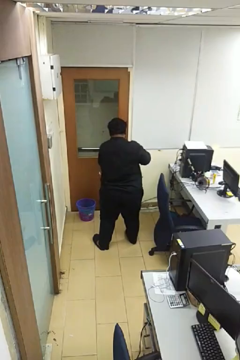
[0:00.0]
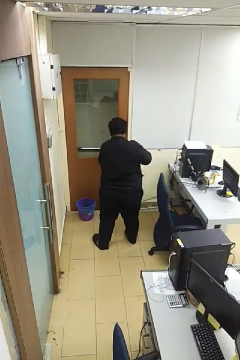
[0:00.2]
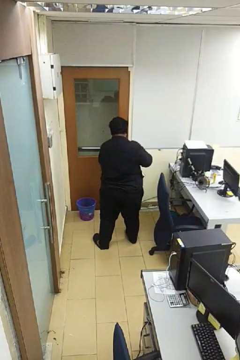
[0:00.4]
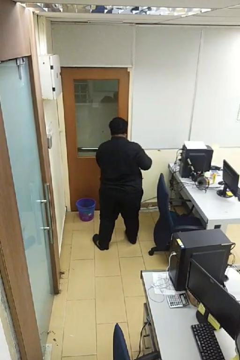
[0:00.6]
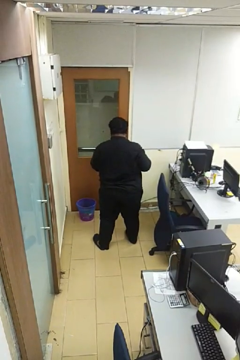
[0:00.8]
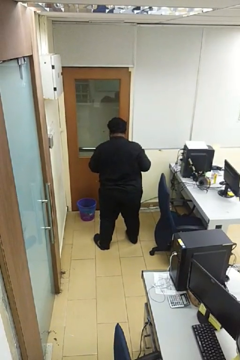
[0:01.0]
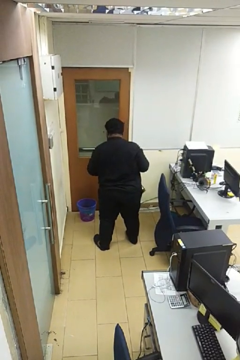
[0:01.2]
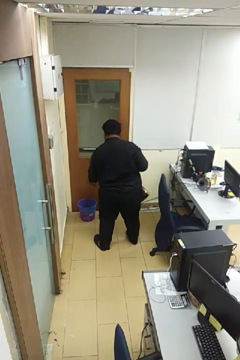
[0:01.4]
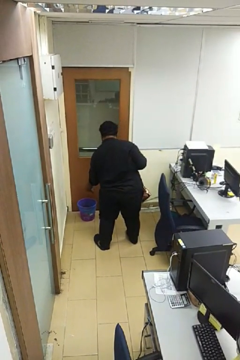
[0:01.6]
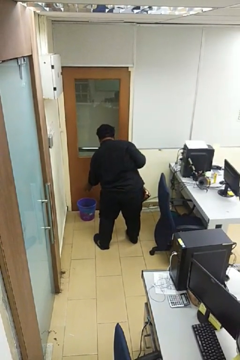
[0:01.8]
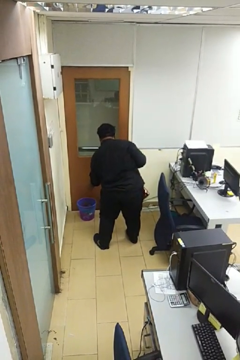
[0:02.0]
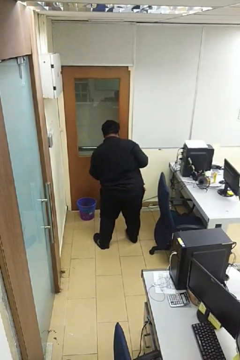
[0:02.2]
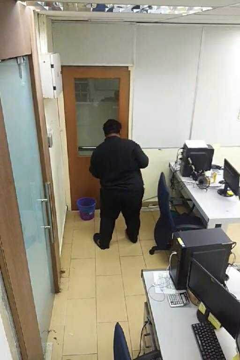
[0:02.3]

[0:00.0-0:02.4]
person discards trash

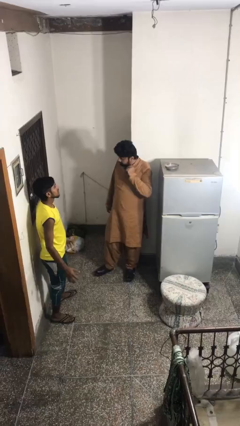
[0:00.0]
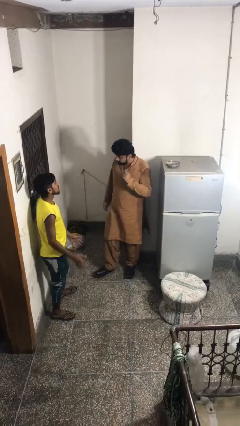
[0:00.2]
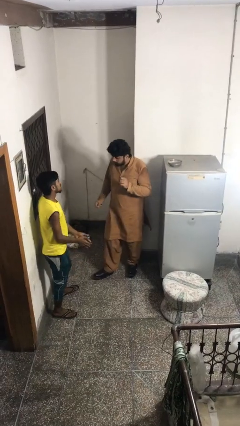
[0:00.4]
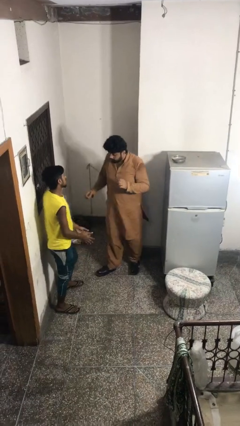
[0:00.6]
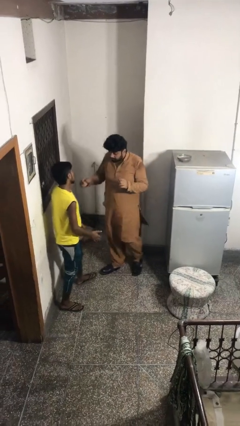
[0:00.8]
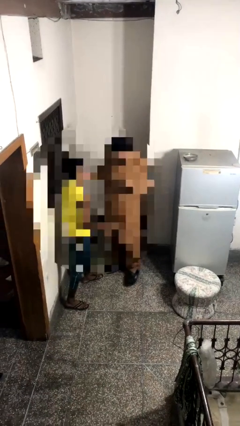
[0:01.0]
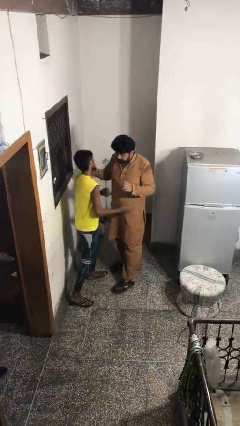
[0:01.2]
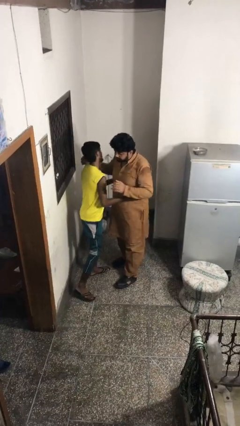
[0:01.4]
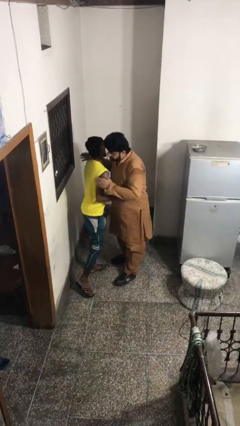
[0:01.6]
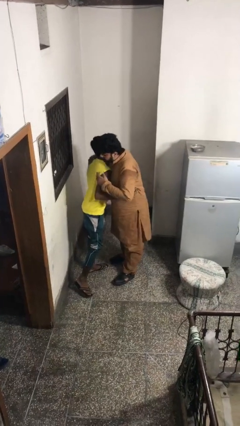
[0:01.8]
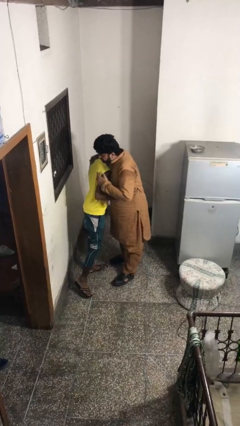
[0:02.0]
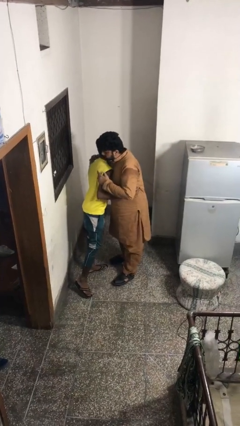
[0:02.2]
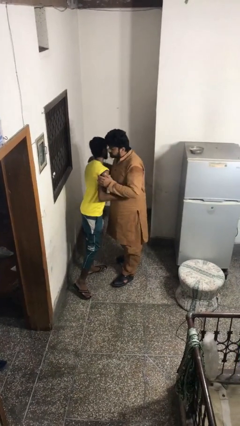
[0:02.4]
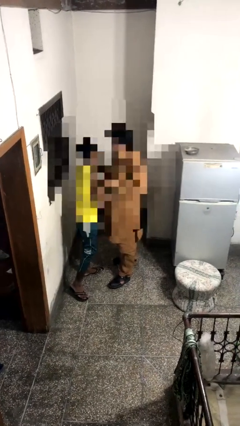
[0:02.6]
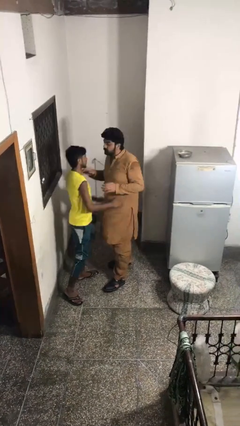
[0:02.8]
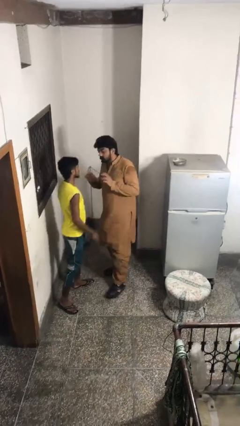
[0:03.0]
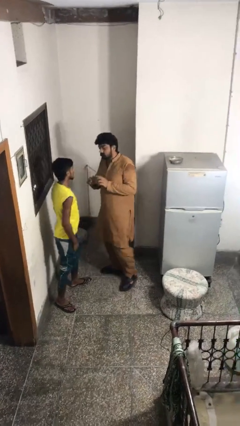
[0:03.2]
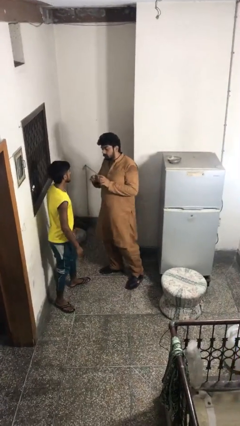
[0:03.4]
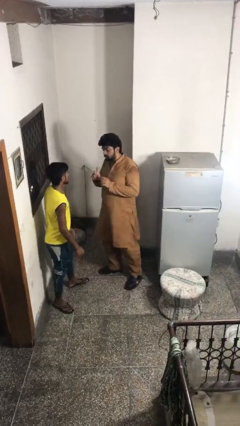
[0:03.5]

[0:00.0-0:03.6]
person embraces person

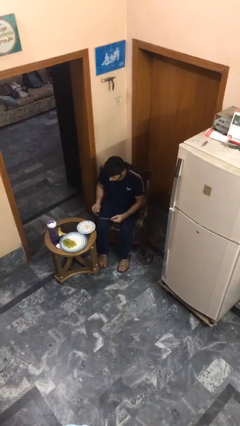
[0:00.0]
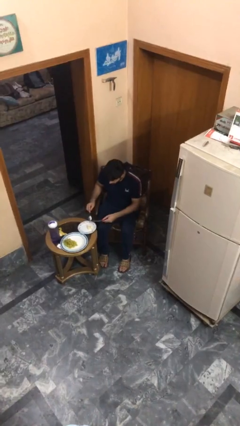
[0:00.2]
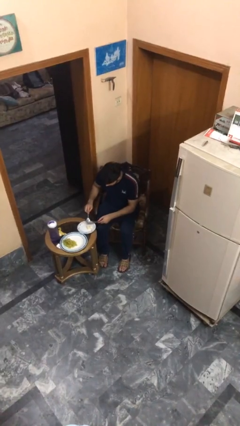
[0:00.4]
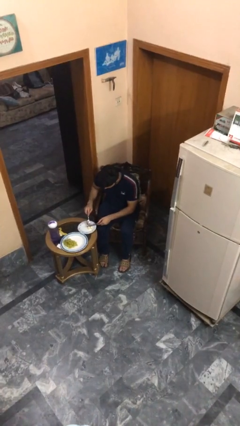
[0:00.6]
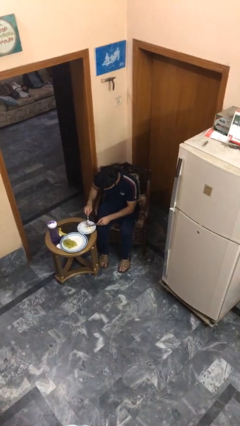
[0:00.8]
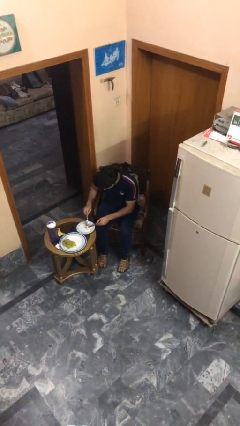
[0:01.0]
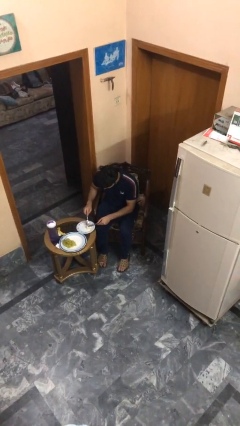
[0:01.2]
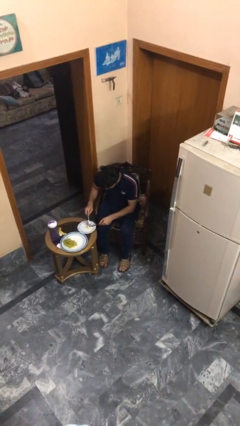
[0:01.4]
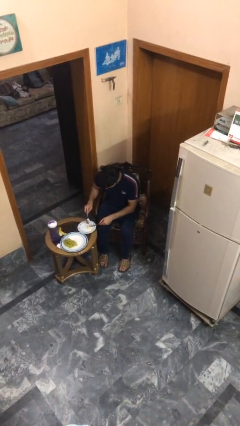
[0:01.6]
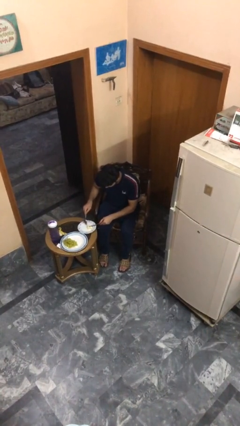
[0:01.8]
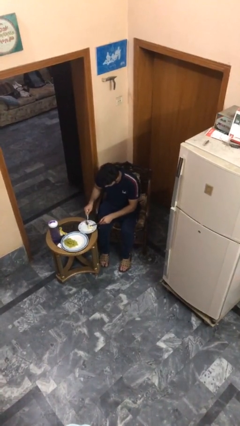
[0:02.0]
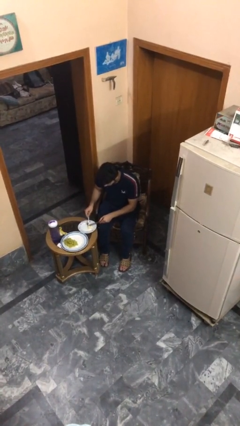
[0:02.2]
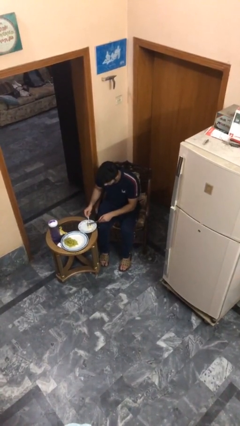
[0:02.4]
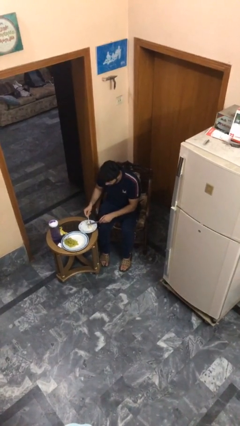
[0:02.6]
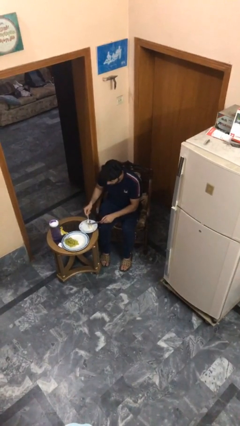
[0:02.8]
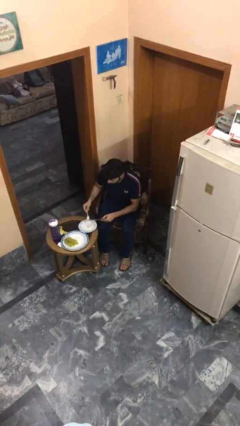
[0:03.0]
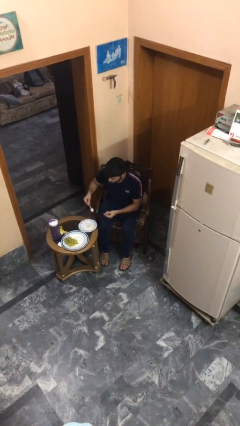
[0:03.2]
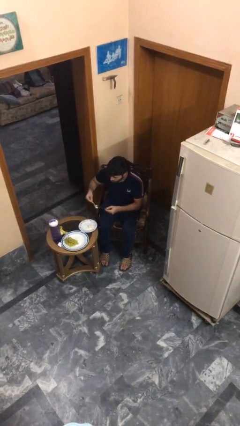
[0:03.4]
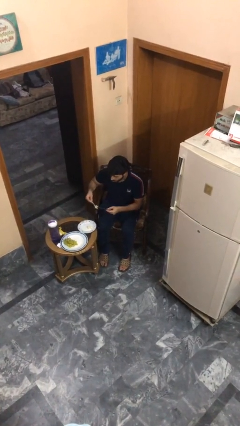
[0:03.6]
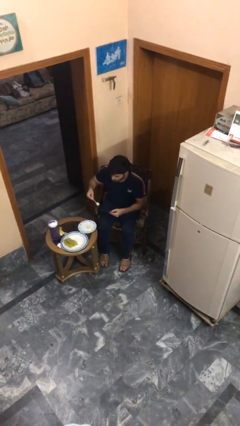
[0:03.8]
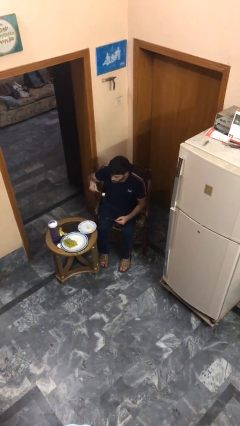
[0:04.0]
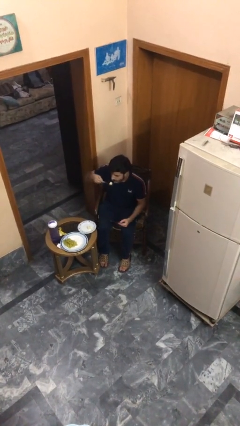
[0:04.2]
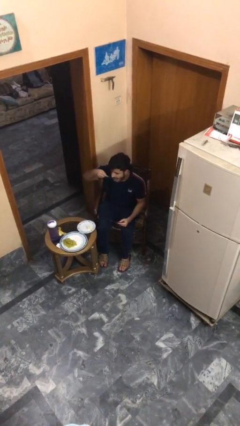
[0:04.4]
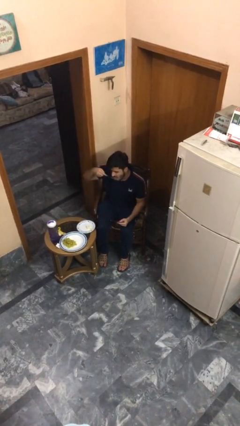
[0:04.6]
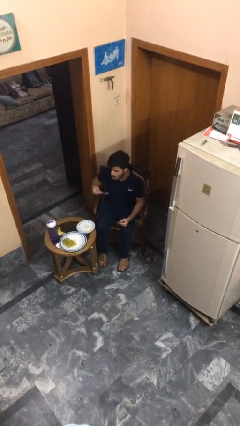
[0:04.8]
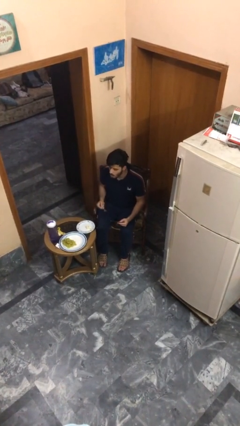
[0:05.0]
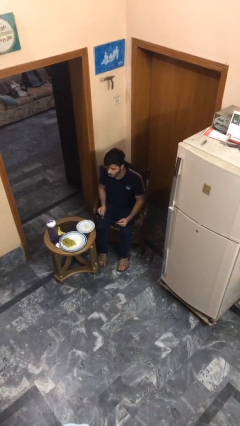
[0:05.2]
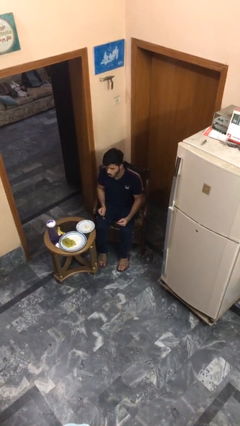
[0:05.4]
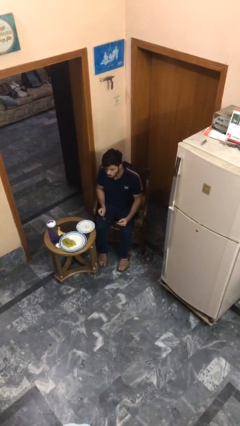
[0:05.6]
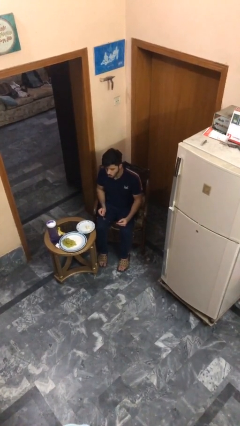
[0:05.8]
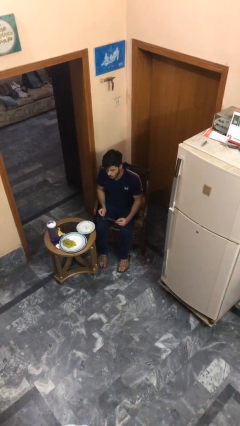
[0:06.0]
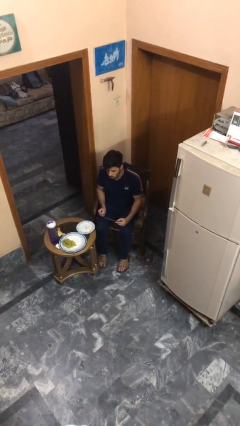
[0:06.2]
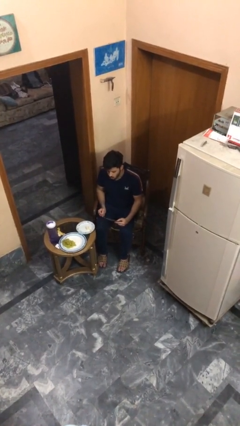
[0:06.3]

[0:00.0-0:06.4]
person eats with utensil

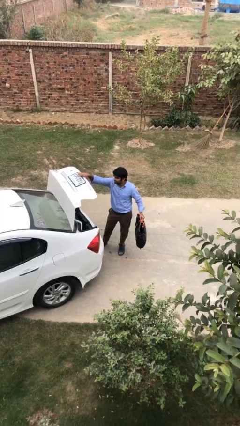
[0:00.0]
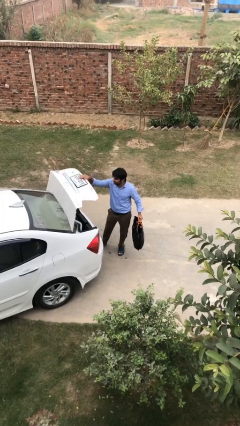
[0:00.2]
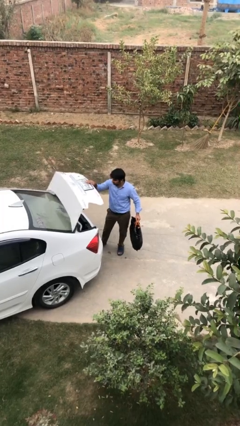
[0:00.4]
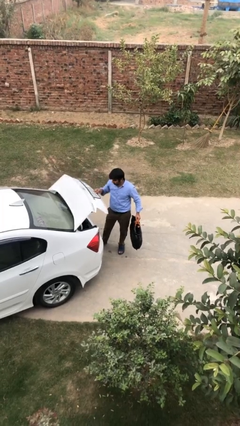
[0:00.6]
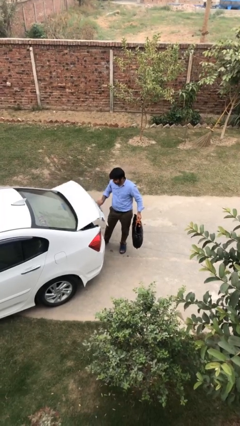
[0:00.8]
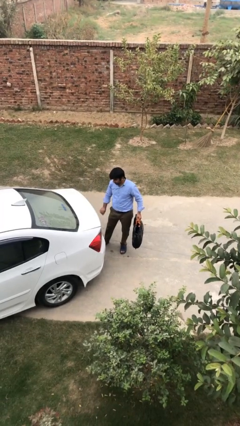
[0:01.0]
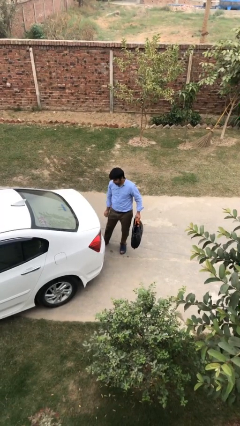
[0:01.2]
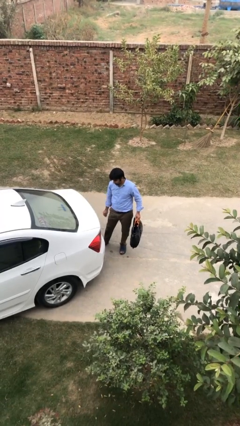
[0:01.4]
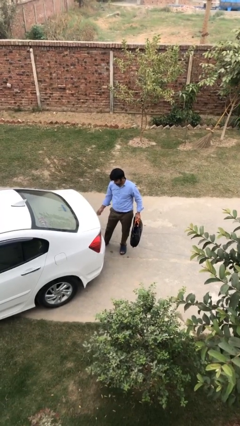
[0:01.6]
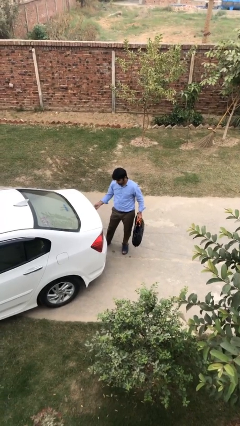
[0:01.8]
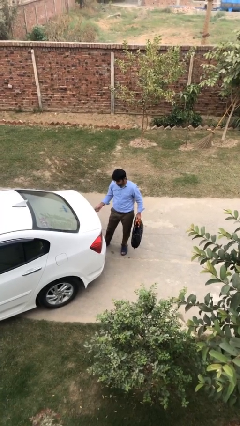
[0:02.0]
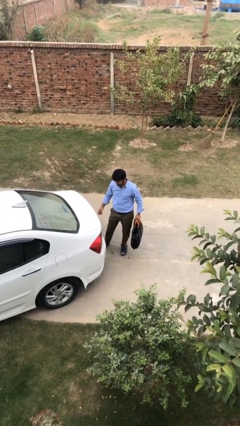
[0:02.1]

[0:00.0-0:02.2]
person closes car trunk

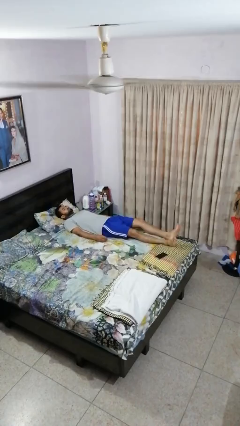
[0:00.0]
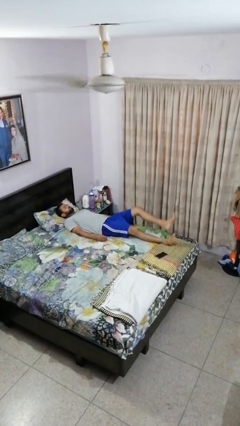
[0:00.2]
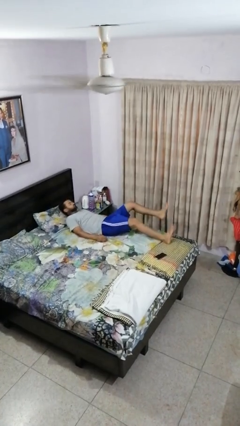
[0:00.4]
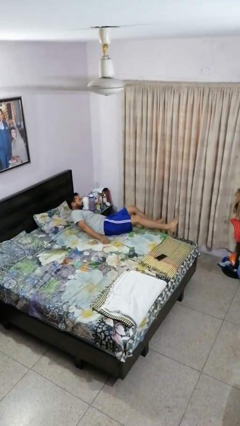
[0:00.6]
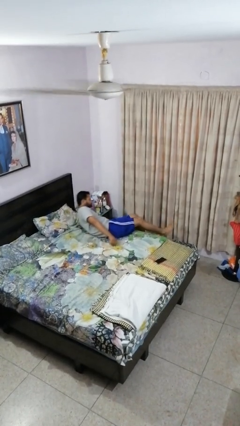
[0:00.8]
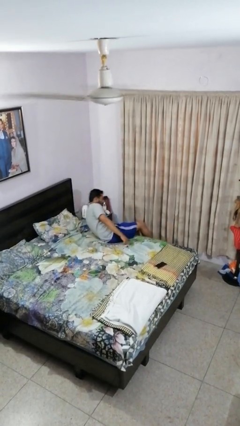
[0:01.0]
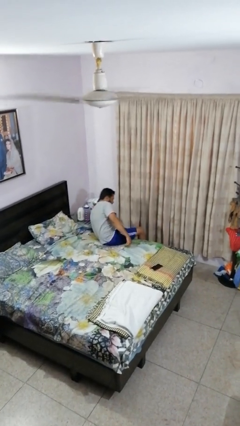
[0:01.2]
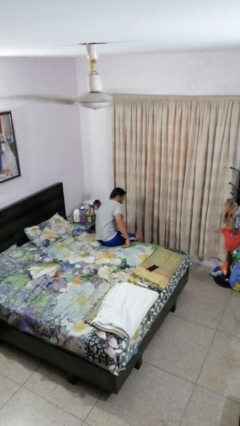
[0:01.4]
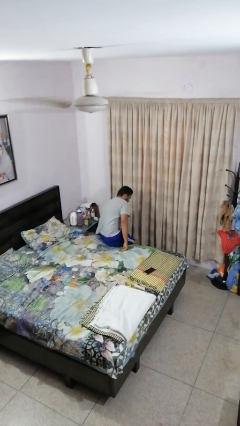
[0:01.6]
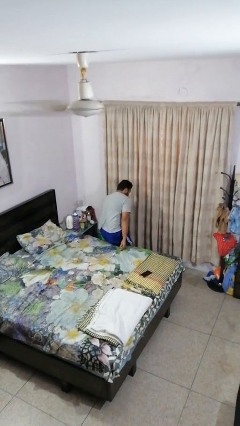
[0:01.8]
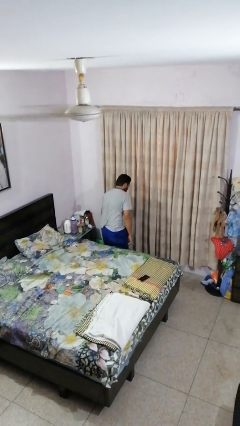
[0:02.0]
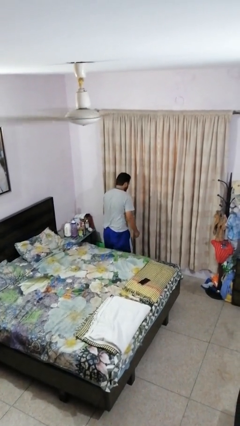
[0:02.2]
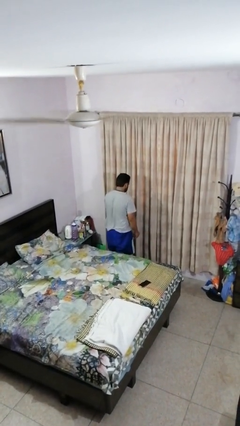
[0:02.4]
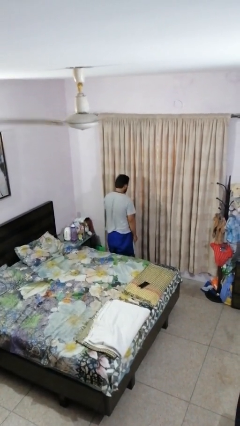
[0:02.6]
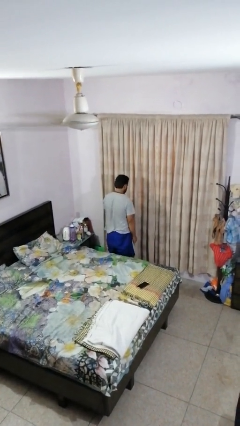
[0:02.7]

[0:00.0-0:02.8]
person stands up

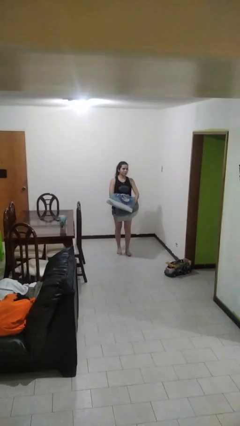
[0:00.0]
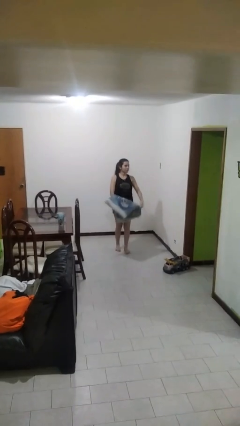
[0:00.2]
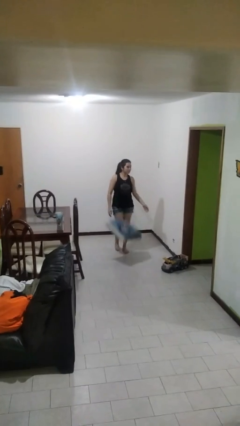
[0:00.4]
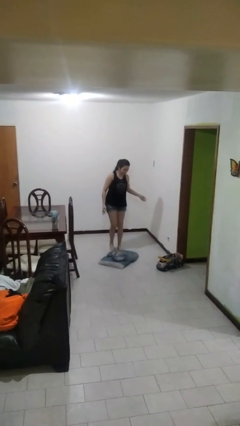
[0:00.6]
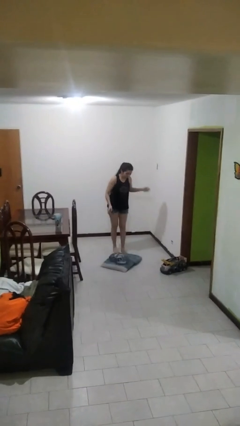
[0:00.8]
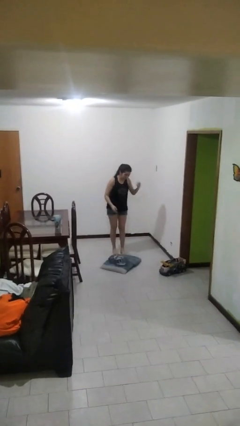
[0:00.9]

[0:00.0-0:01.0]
person drops object
